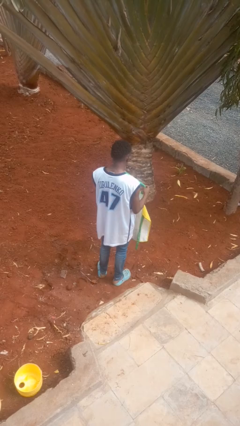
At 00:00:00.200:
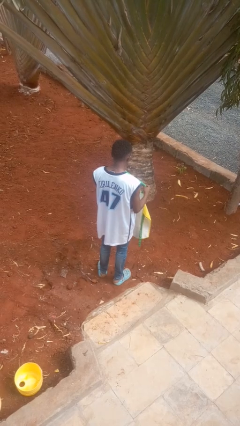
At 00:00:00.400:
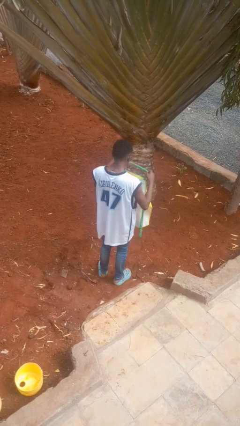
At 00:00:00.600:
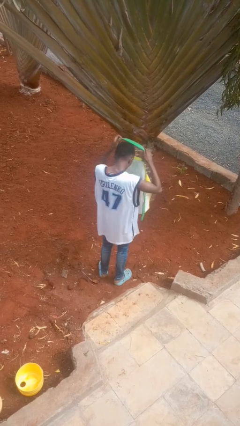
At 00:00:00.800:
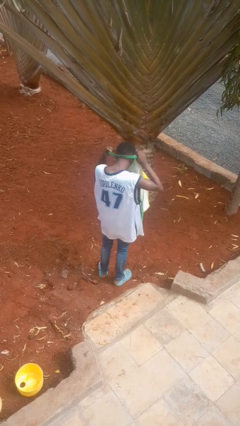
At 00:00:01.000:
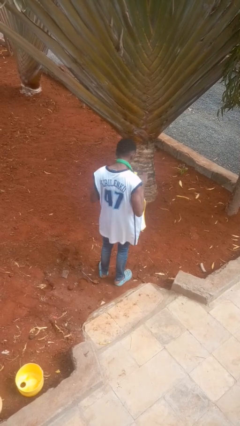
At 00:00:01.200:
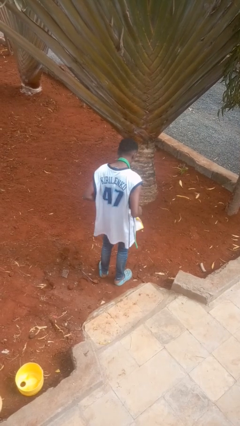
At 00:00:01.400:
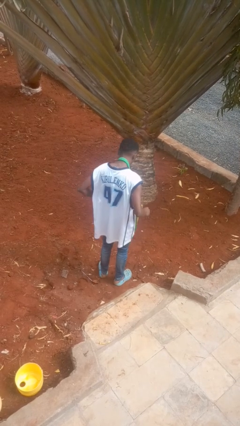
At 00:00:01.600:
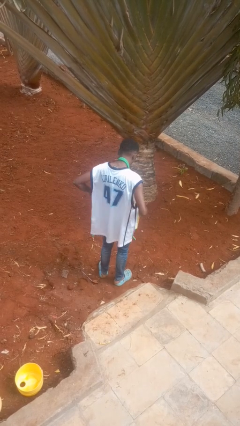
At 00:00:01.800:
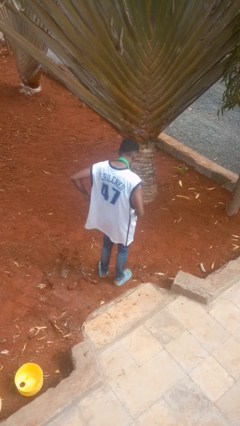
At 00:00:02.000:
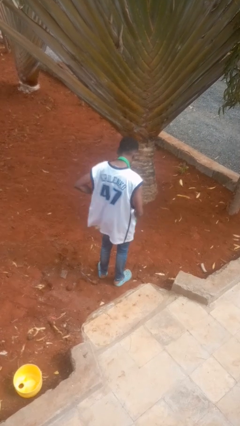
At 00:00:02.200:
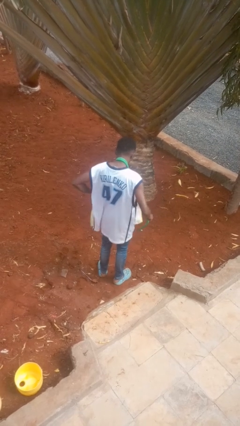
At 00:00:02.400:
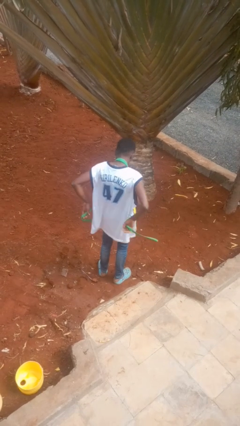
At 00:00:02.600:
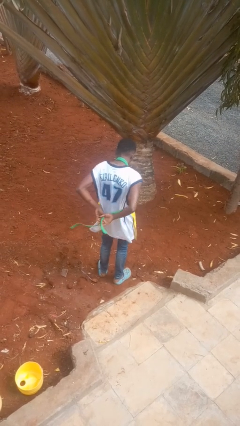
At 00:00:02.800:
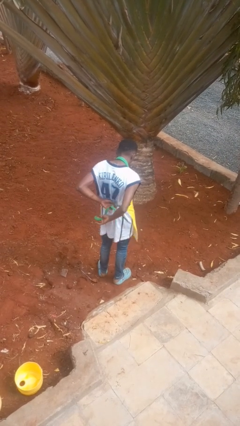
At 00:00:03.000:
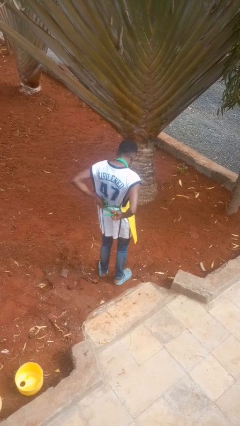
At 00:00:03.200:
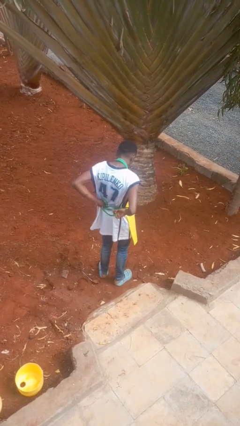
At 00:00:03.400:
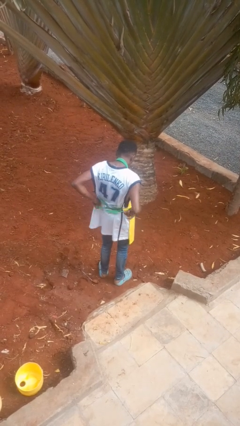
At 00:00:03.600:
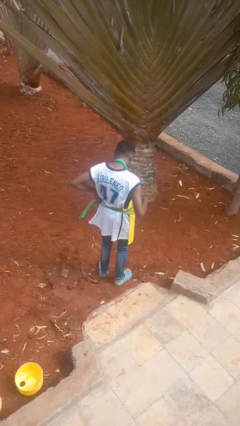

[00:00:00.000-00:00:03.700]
person puts on apron

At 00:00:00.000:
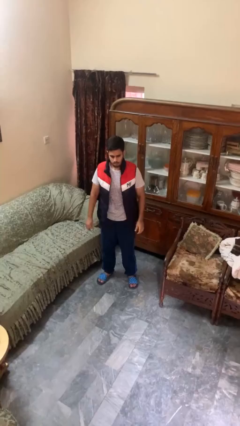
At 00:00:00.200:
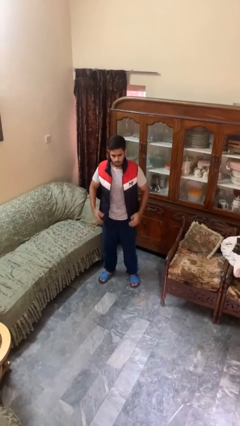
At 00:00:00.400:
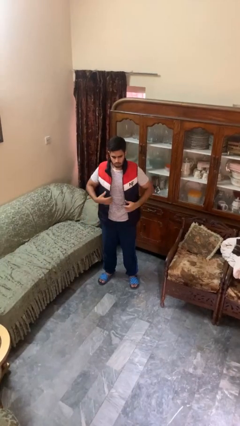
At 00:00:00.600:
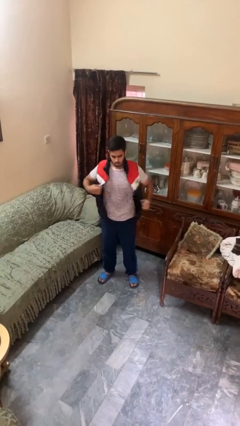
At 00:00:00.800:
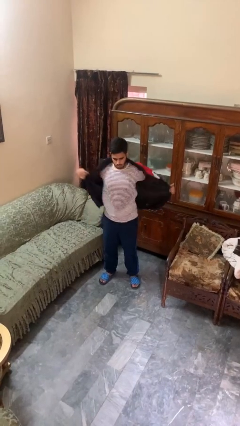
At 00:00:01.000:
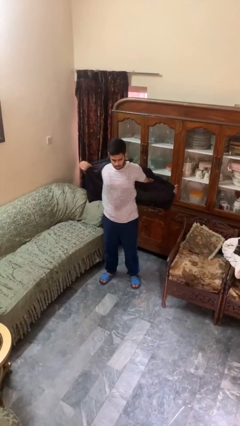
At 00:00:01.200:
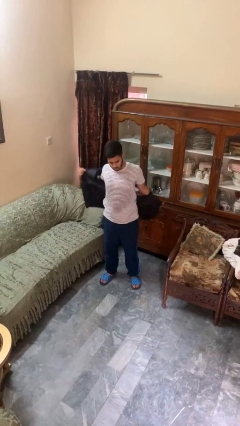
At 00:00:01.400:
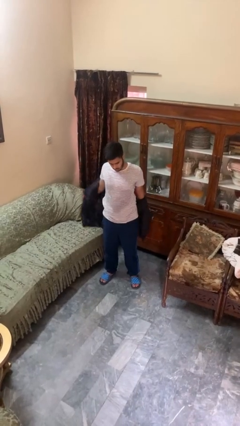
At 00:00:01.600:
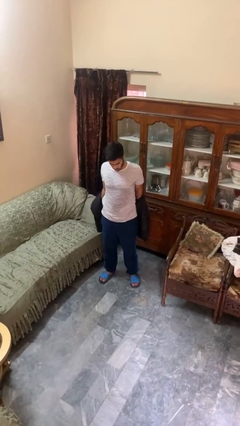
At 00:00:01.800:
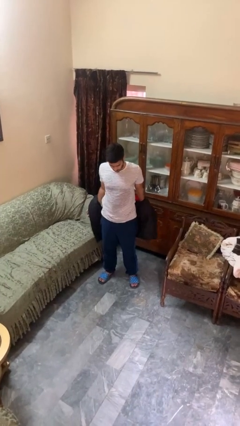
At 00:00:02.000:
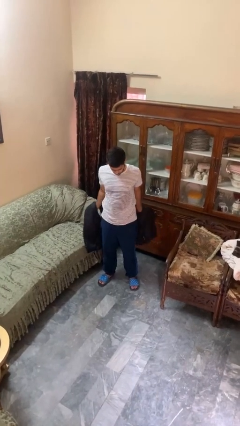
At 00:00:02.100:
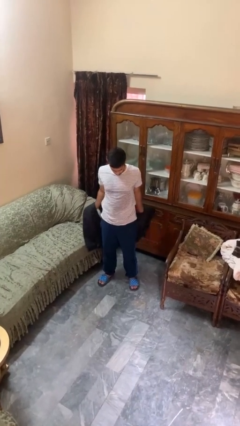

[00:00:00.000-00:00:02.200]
person takes off jacket

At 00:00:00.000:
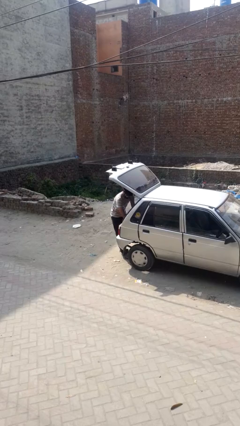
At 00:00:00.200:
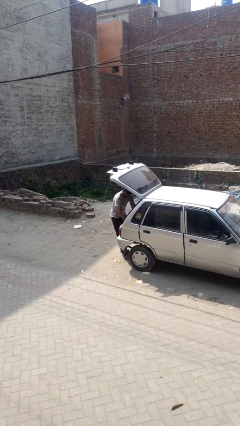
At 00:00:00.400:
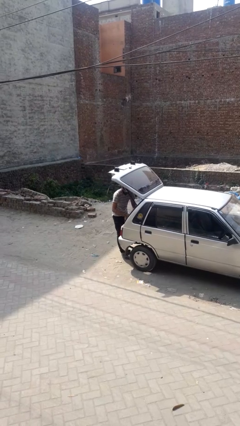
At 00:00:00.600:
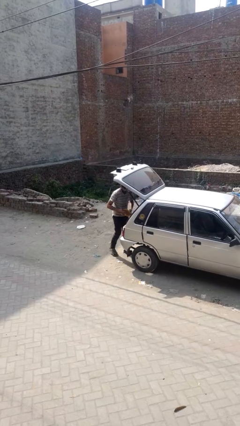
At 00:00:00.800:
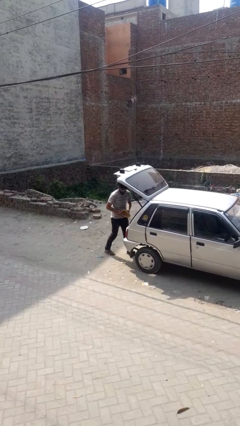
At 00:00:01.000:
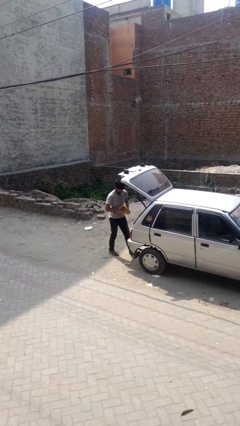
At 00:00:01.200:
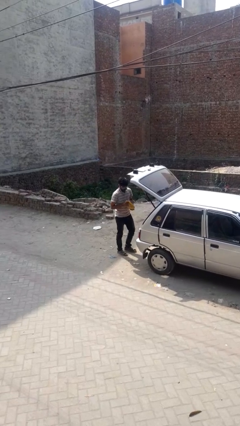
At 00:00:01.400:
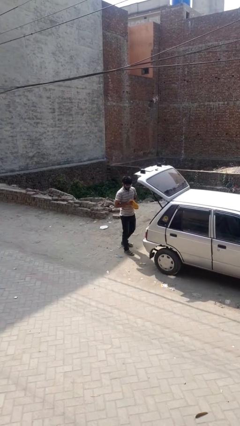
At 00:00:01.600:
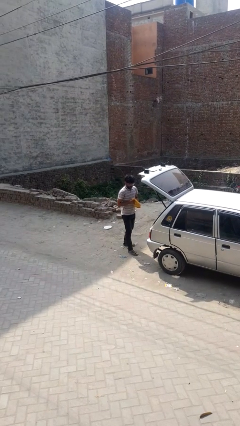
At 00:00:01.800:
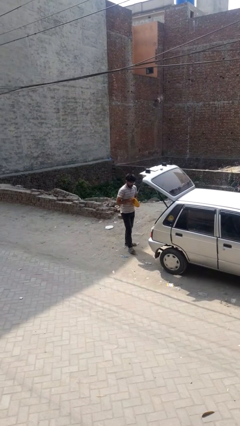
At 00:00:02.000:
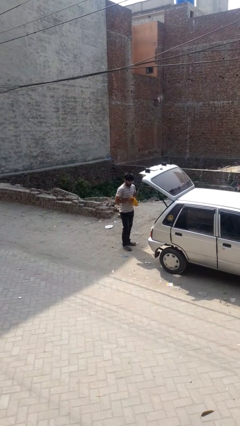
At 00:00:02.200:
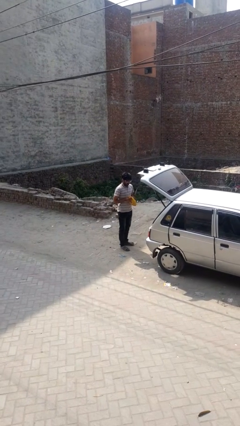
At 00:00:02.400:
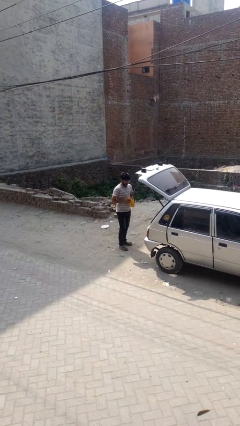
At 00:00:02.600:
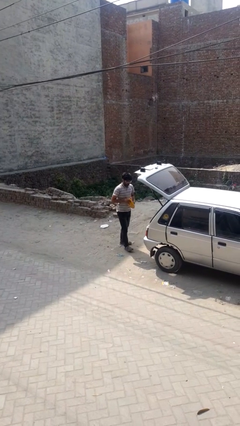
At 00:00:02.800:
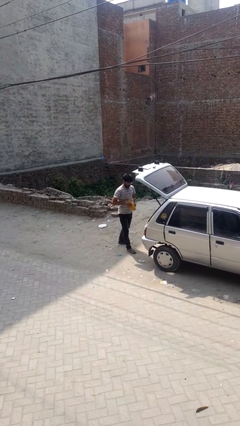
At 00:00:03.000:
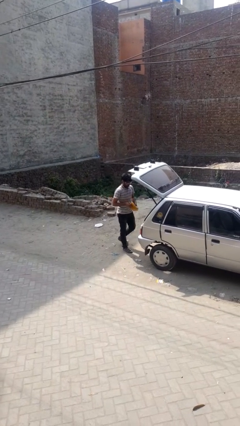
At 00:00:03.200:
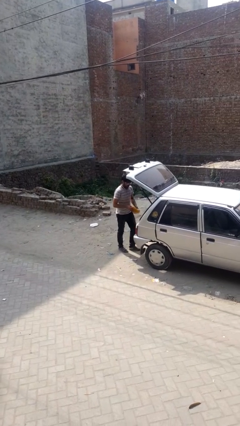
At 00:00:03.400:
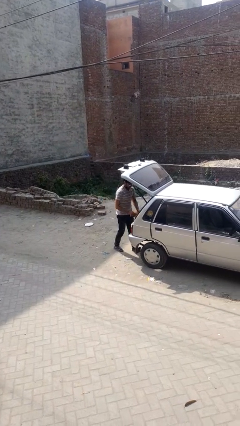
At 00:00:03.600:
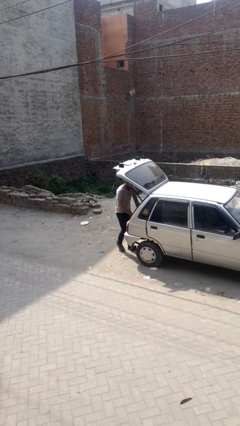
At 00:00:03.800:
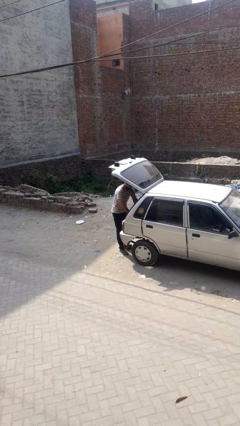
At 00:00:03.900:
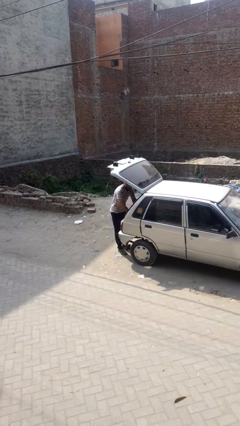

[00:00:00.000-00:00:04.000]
person unloads car

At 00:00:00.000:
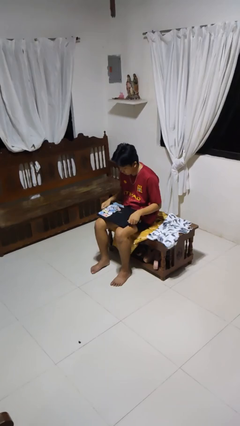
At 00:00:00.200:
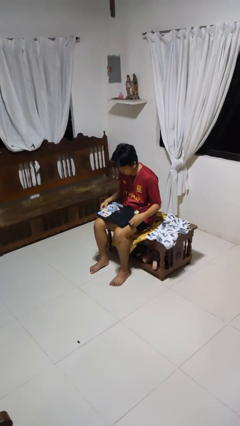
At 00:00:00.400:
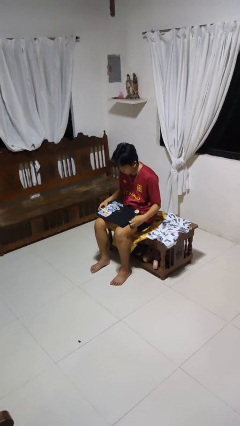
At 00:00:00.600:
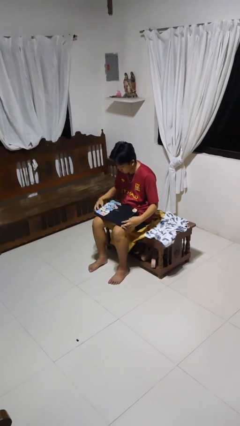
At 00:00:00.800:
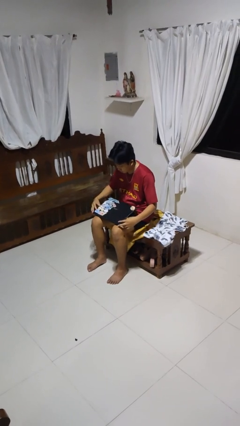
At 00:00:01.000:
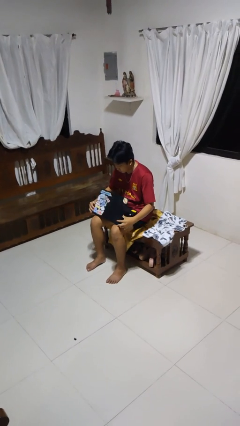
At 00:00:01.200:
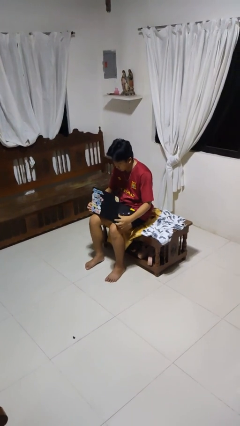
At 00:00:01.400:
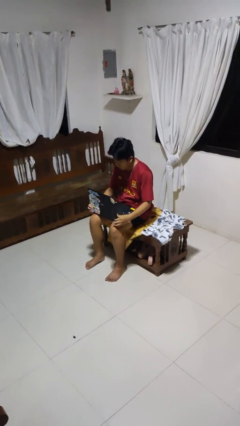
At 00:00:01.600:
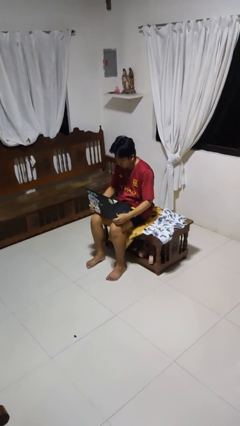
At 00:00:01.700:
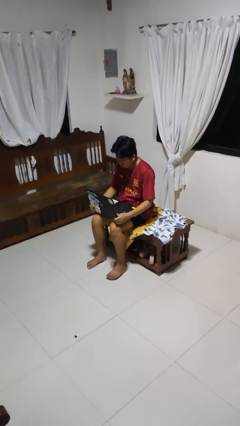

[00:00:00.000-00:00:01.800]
person opens laptop

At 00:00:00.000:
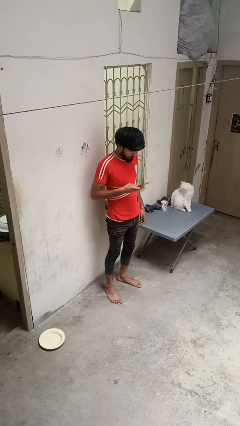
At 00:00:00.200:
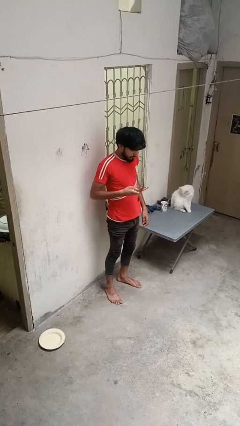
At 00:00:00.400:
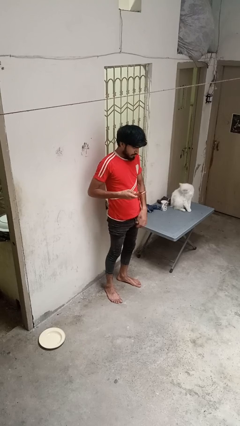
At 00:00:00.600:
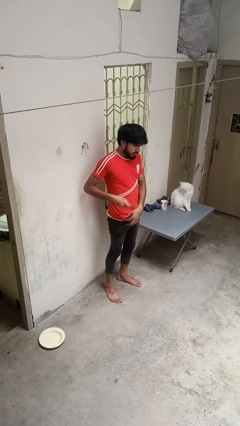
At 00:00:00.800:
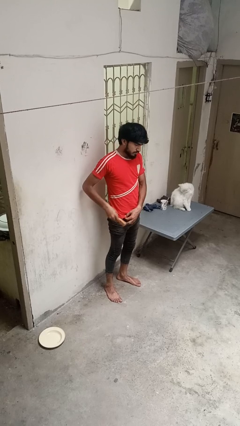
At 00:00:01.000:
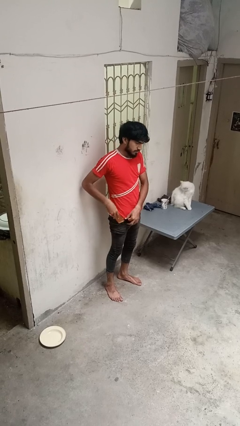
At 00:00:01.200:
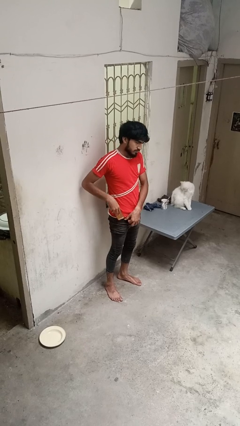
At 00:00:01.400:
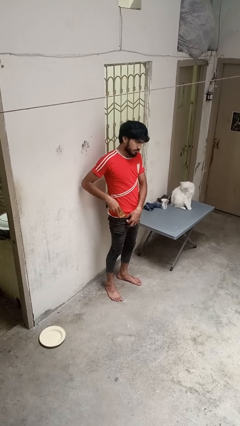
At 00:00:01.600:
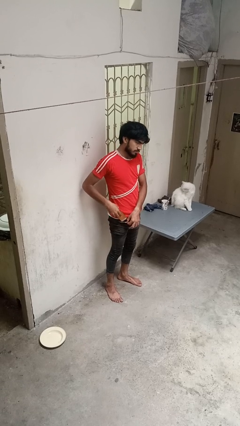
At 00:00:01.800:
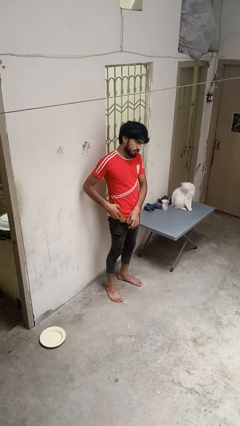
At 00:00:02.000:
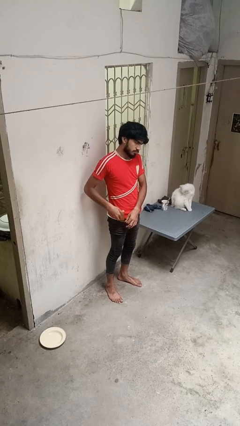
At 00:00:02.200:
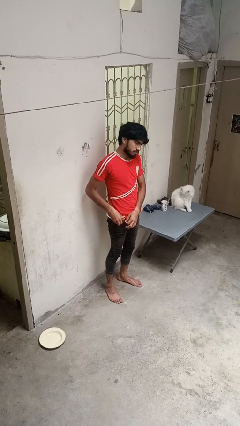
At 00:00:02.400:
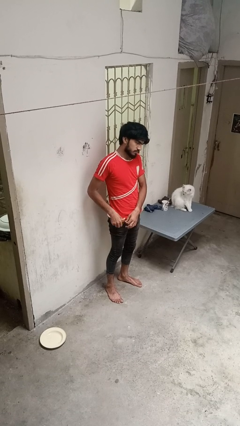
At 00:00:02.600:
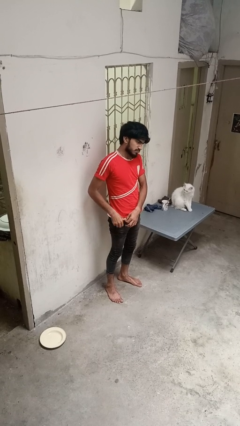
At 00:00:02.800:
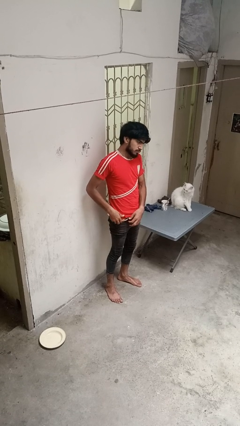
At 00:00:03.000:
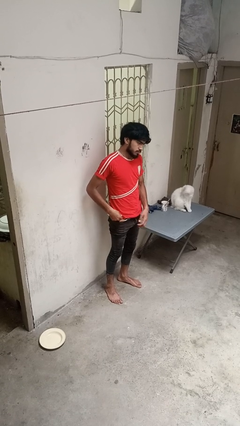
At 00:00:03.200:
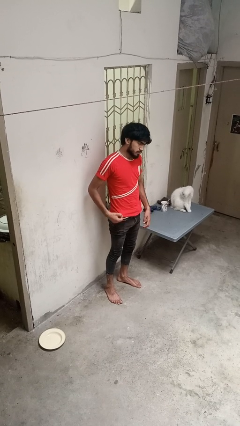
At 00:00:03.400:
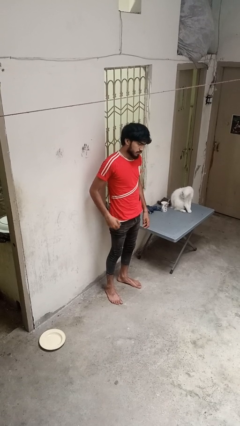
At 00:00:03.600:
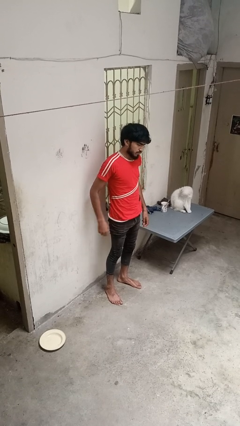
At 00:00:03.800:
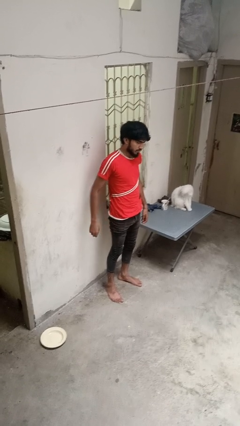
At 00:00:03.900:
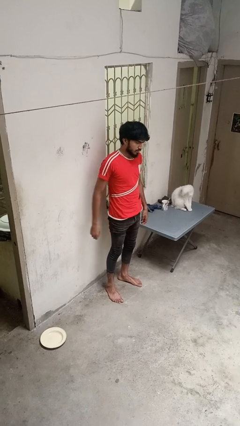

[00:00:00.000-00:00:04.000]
person puts phone into pocket

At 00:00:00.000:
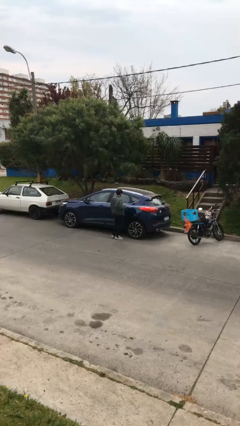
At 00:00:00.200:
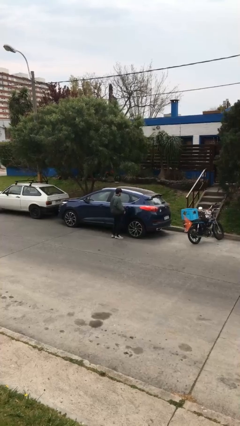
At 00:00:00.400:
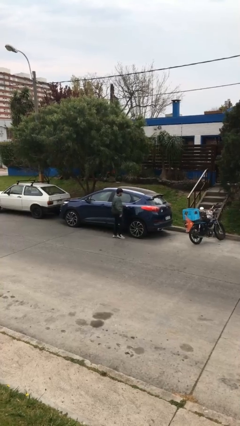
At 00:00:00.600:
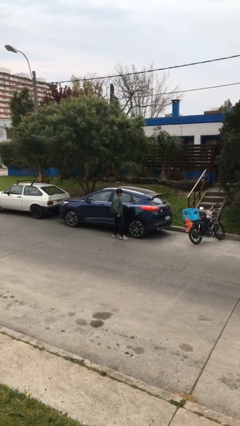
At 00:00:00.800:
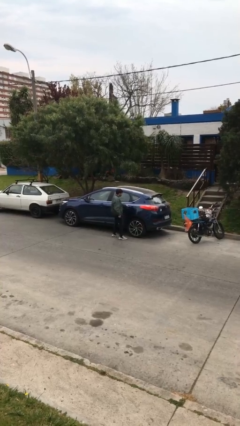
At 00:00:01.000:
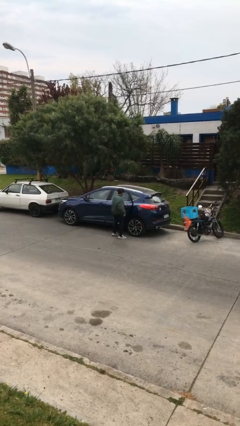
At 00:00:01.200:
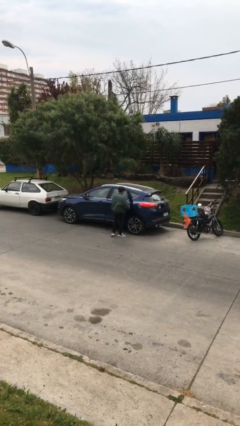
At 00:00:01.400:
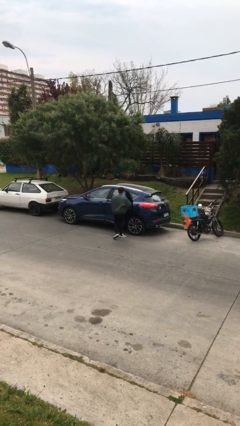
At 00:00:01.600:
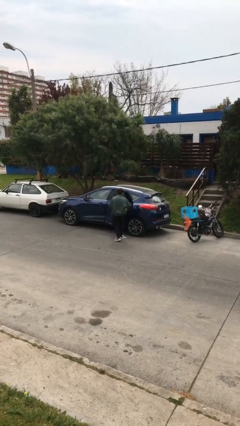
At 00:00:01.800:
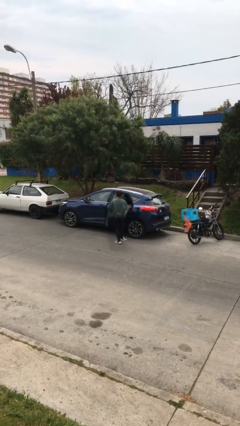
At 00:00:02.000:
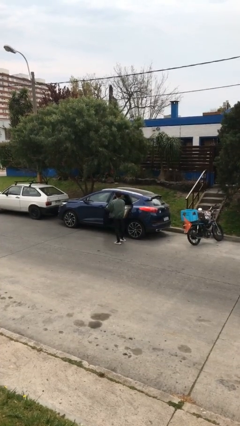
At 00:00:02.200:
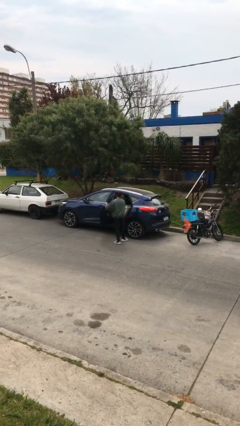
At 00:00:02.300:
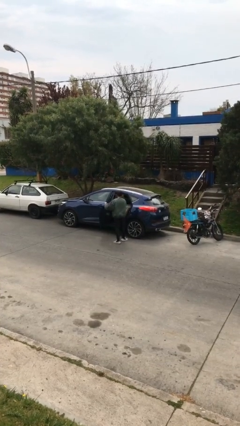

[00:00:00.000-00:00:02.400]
person opens car door
